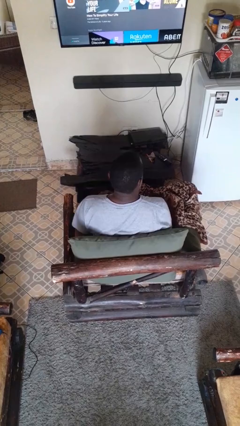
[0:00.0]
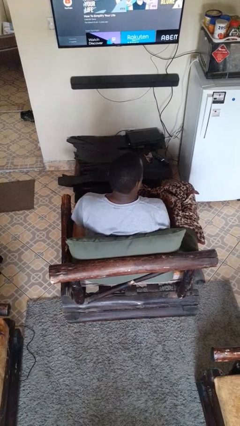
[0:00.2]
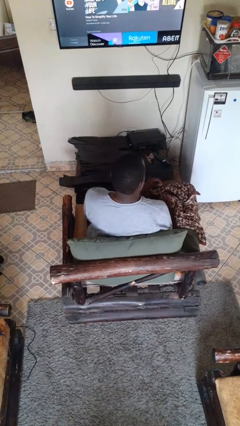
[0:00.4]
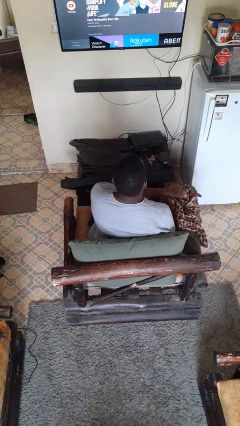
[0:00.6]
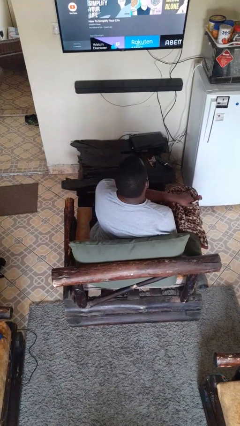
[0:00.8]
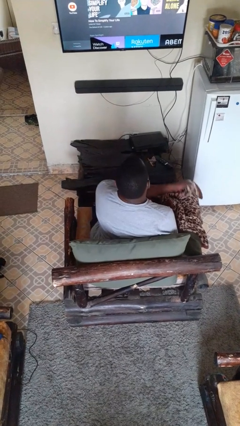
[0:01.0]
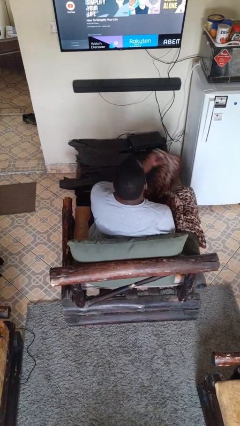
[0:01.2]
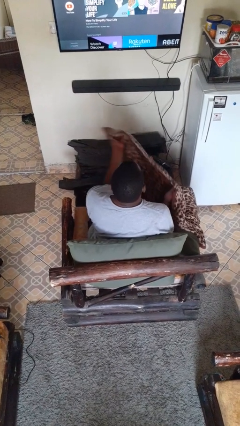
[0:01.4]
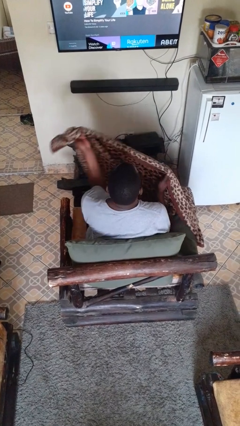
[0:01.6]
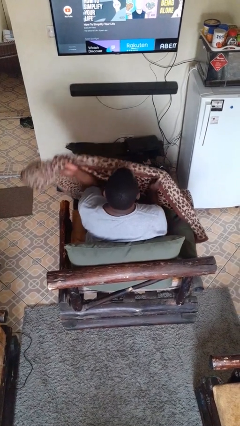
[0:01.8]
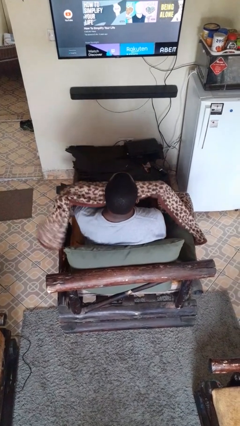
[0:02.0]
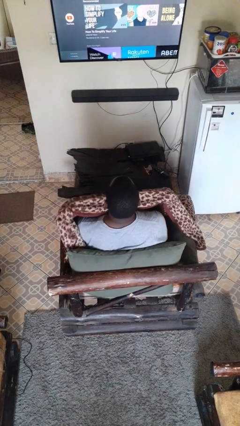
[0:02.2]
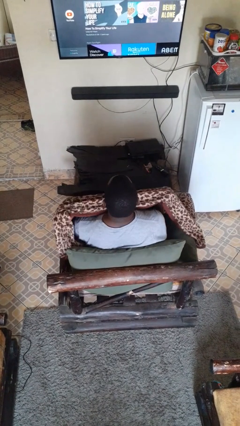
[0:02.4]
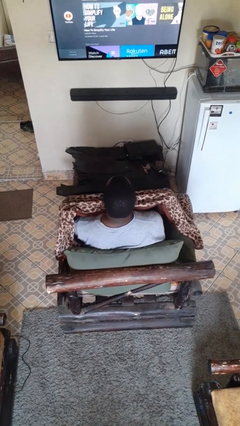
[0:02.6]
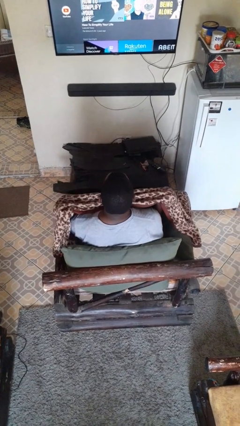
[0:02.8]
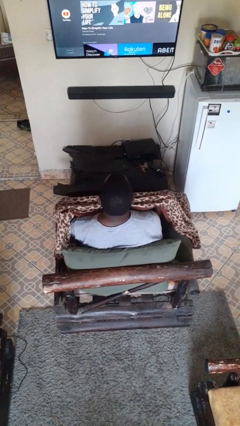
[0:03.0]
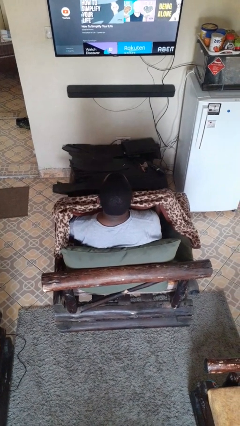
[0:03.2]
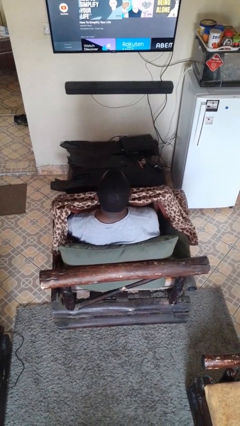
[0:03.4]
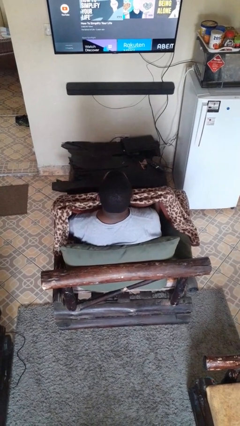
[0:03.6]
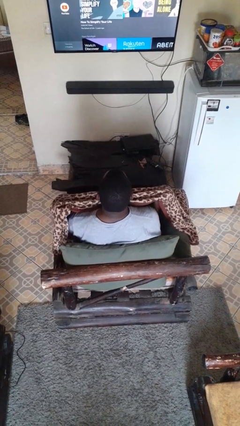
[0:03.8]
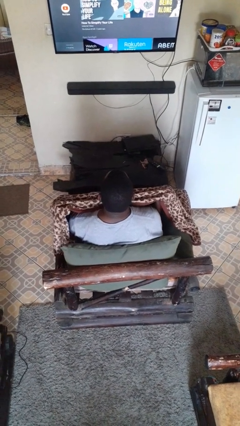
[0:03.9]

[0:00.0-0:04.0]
person covers with blanket

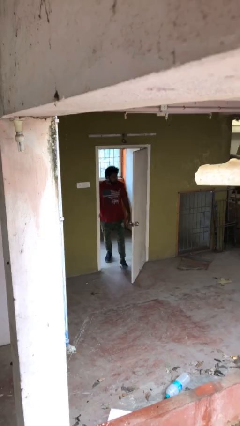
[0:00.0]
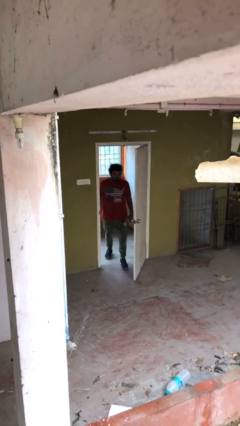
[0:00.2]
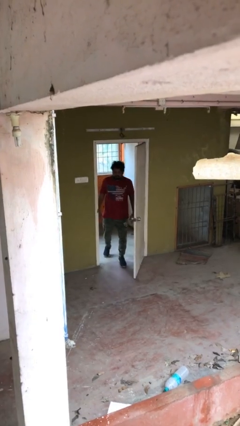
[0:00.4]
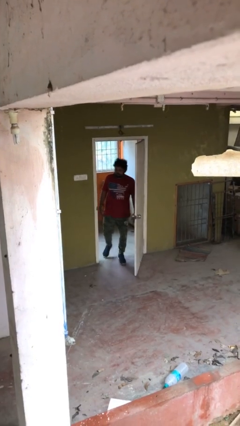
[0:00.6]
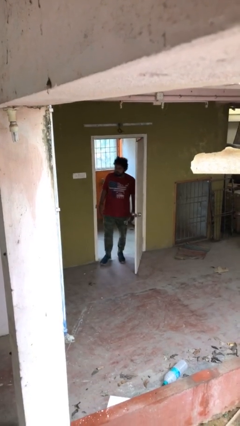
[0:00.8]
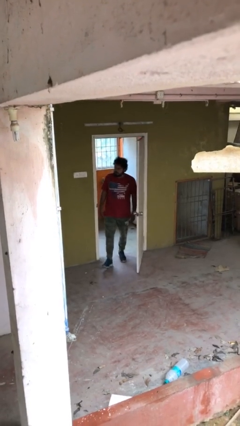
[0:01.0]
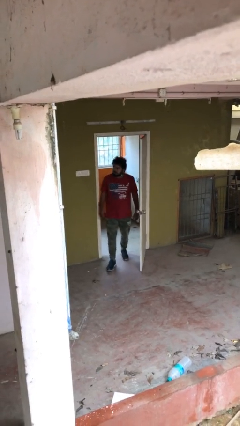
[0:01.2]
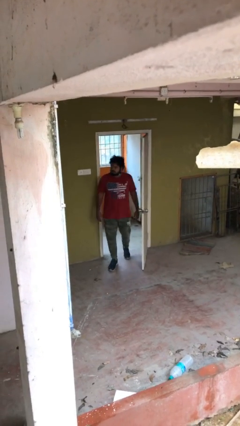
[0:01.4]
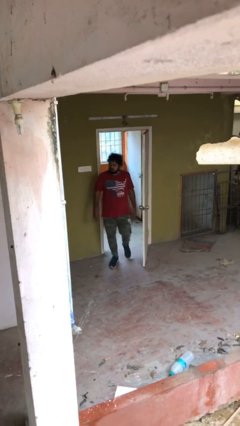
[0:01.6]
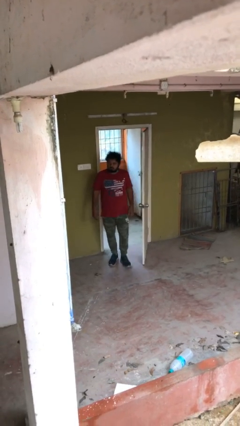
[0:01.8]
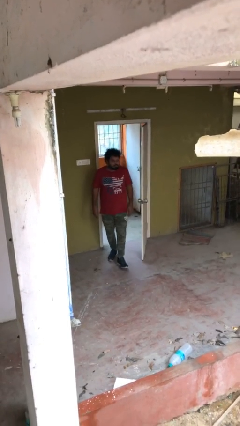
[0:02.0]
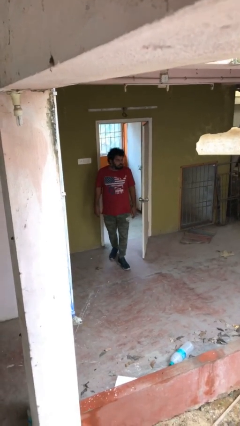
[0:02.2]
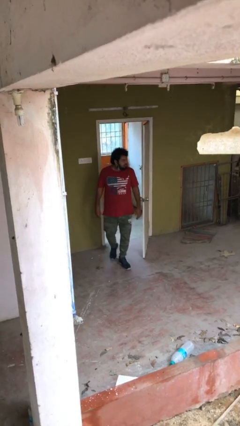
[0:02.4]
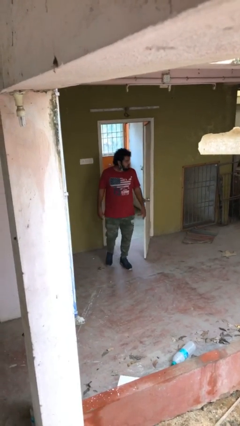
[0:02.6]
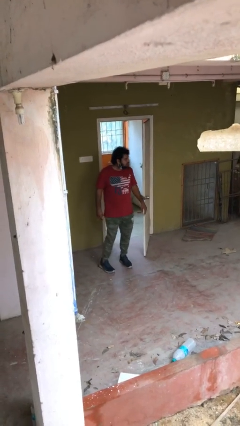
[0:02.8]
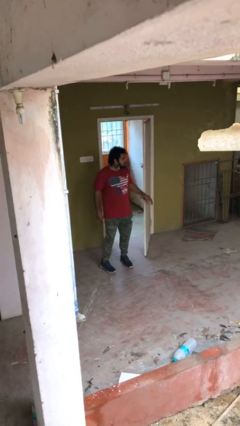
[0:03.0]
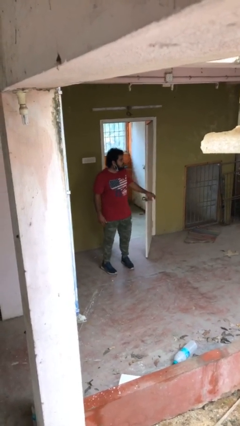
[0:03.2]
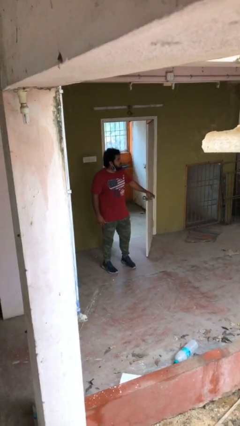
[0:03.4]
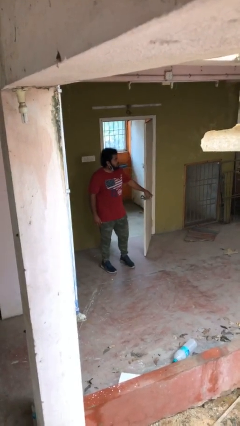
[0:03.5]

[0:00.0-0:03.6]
person enters scene through structure

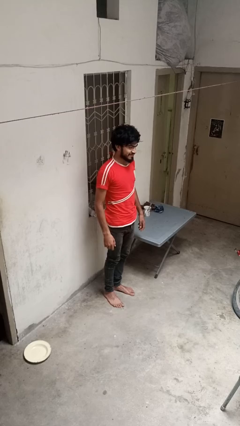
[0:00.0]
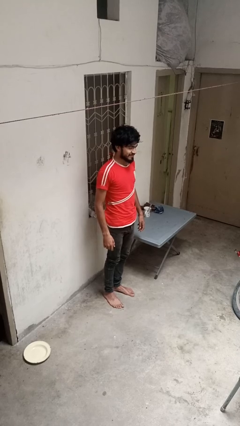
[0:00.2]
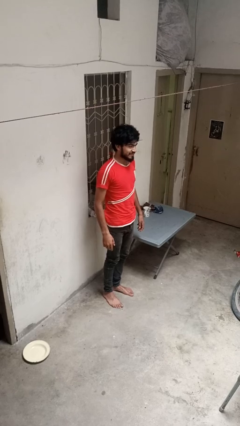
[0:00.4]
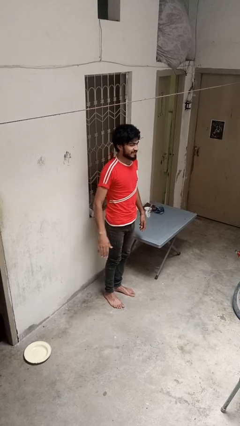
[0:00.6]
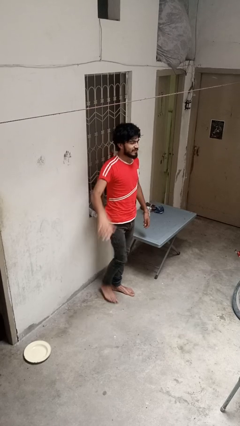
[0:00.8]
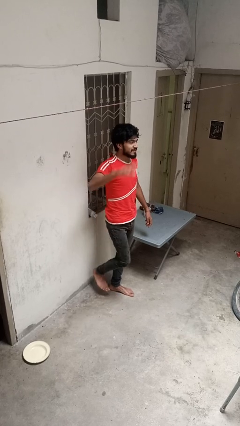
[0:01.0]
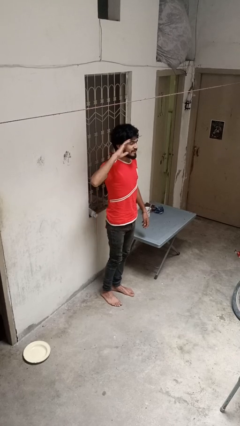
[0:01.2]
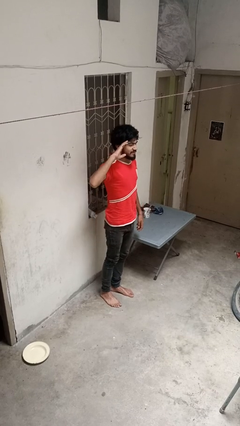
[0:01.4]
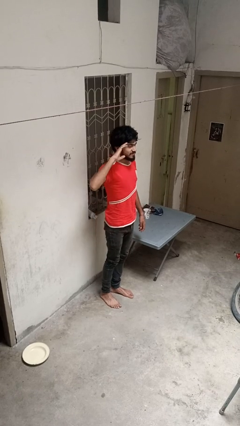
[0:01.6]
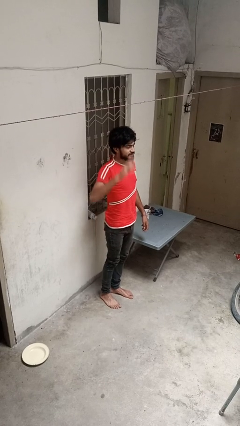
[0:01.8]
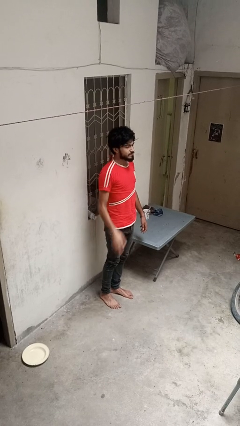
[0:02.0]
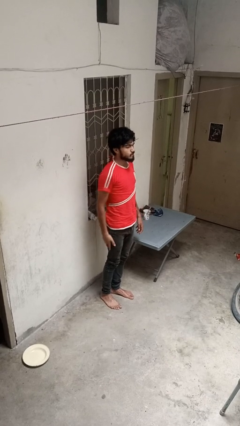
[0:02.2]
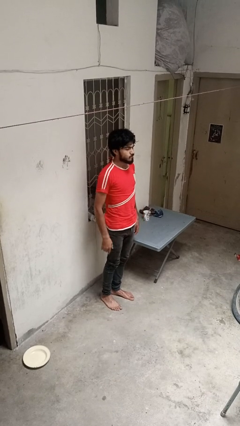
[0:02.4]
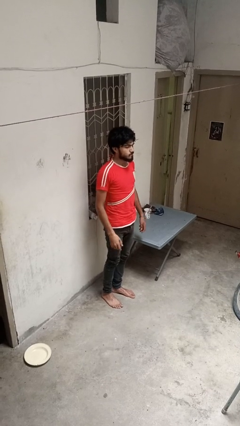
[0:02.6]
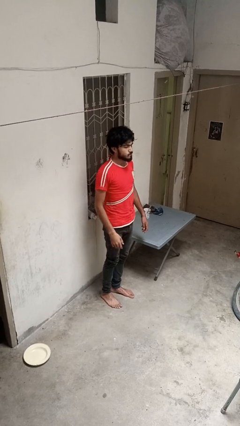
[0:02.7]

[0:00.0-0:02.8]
person salutes

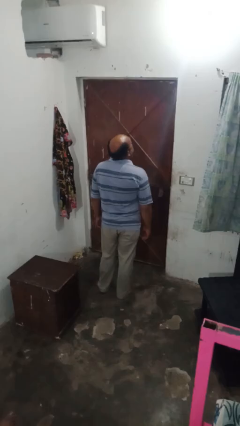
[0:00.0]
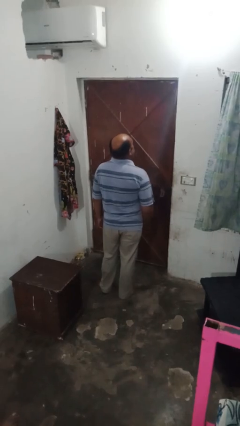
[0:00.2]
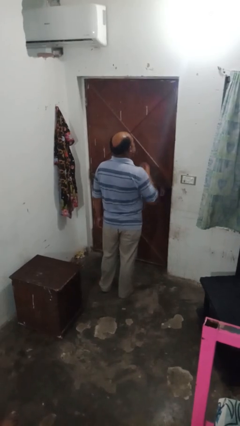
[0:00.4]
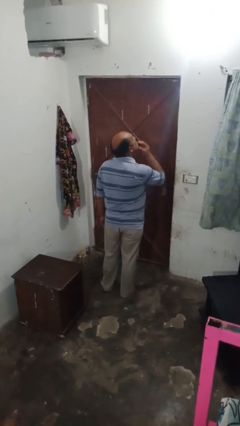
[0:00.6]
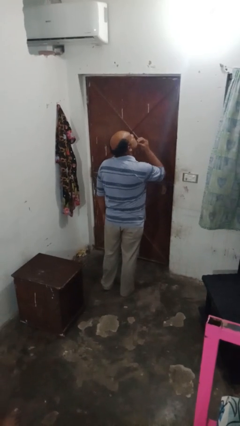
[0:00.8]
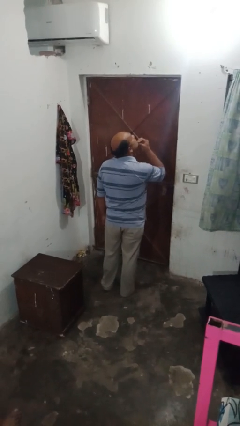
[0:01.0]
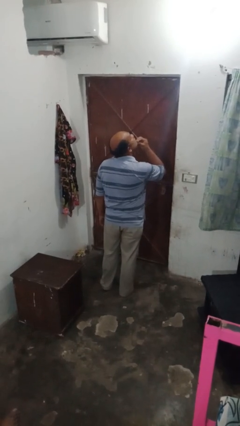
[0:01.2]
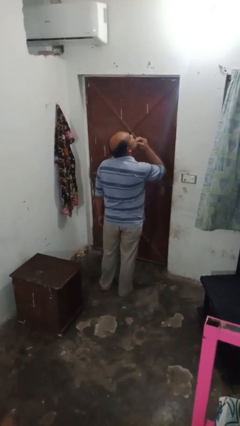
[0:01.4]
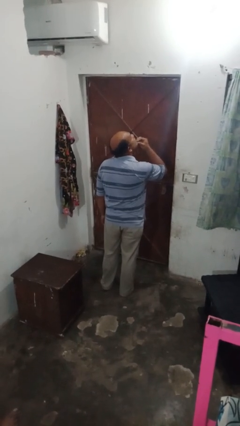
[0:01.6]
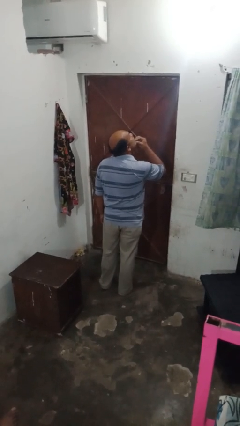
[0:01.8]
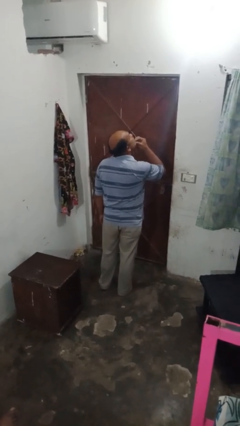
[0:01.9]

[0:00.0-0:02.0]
person strokes chin

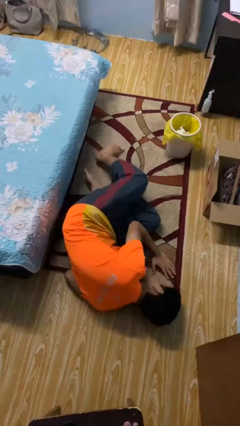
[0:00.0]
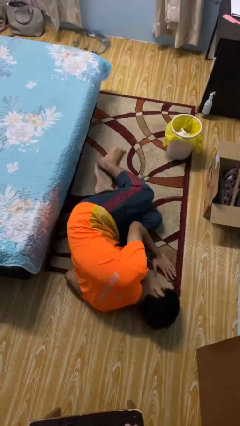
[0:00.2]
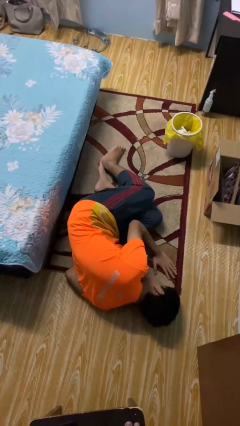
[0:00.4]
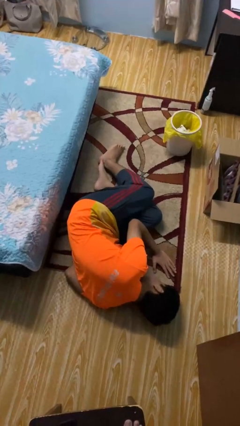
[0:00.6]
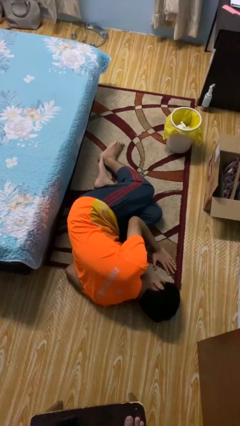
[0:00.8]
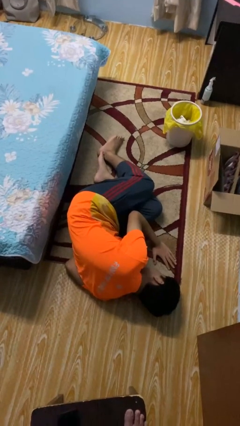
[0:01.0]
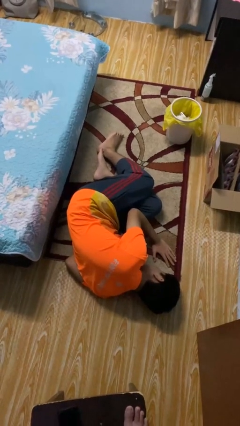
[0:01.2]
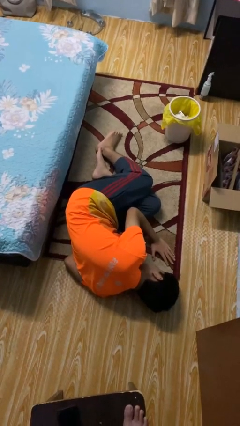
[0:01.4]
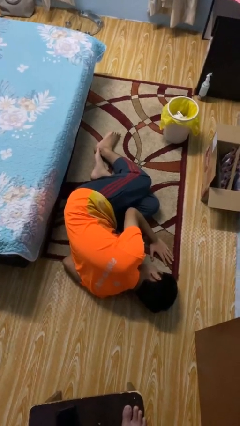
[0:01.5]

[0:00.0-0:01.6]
person lies down on floor

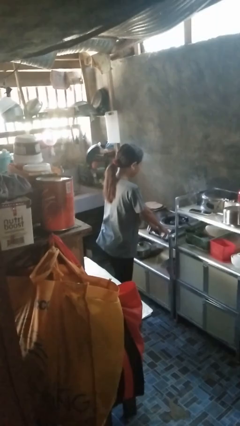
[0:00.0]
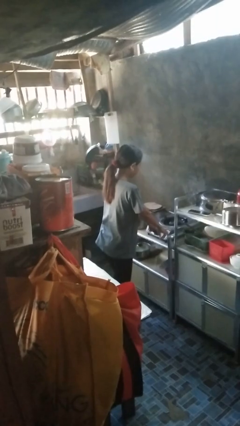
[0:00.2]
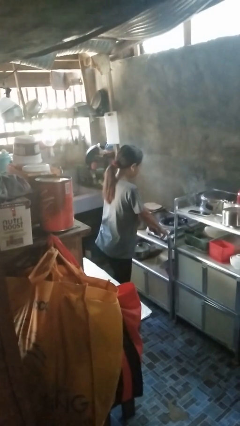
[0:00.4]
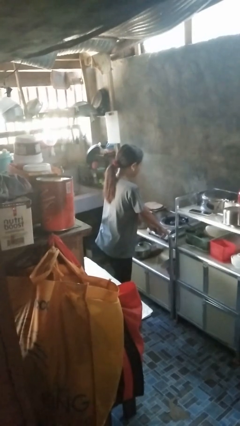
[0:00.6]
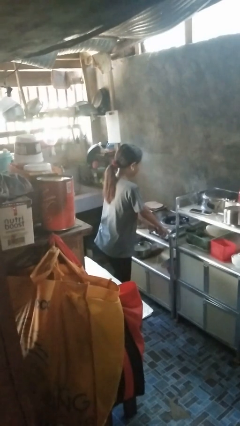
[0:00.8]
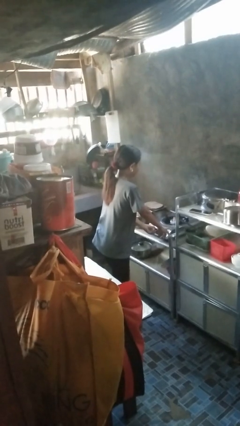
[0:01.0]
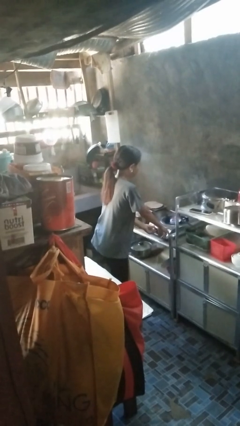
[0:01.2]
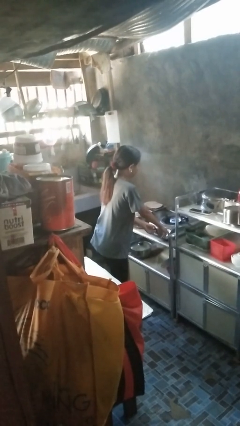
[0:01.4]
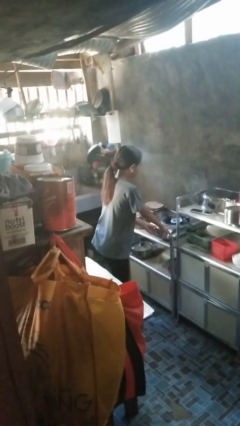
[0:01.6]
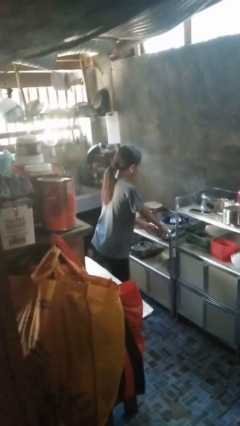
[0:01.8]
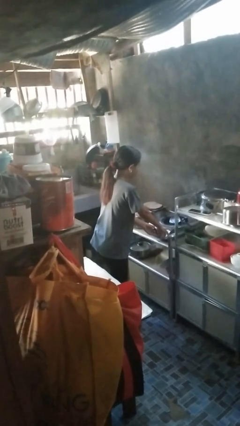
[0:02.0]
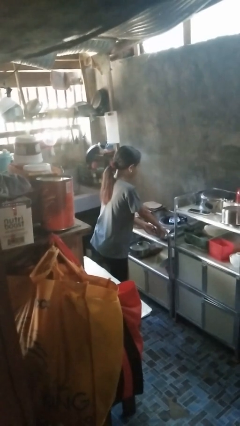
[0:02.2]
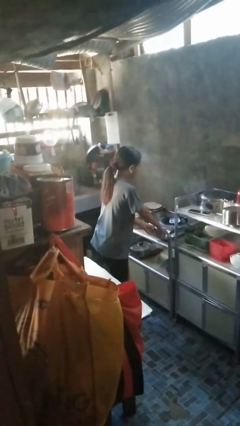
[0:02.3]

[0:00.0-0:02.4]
person turns on stovetop

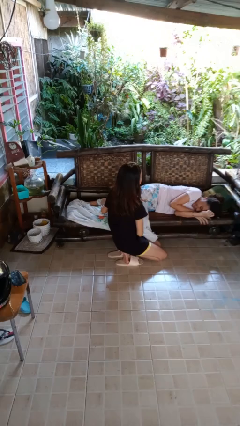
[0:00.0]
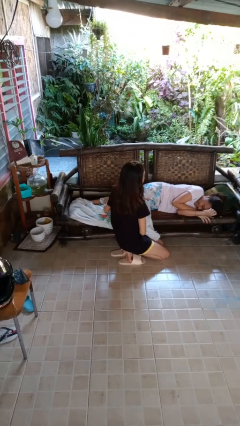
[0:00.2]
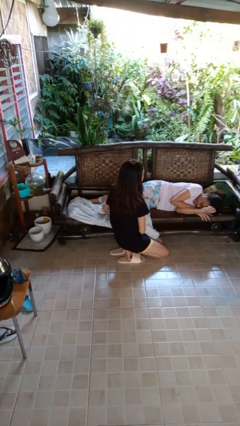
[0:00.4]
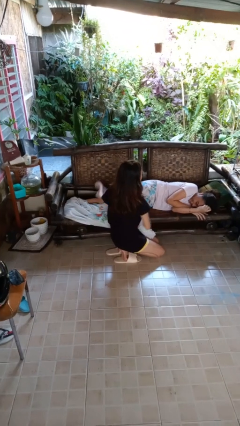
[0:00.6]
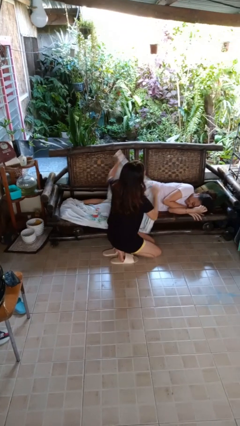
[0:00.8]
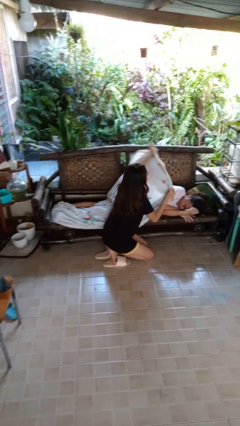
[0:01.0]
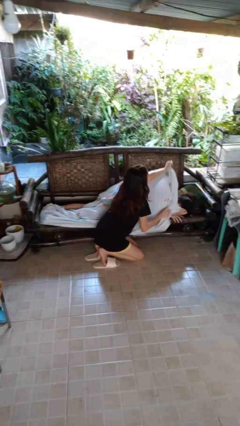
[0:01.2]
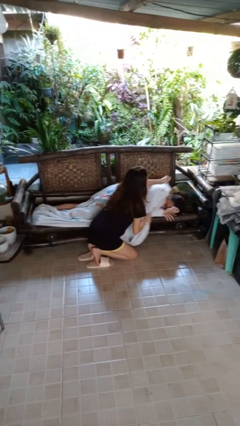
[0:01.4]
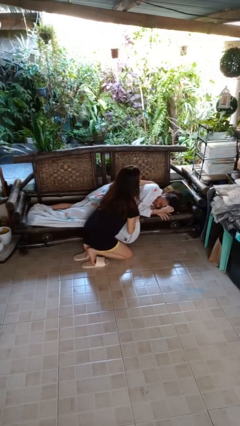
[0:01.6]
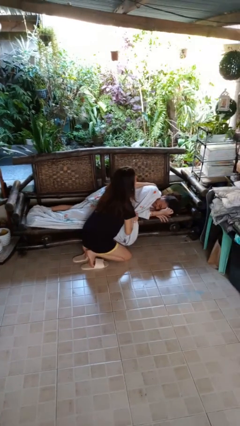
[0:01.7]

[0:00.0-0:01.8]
person covers friend with blanket
